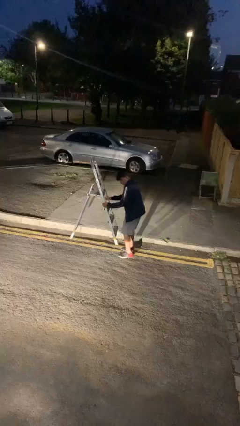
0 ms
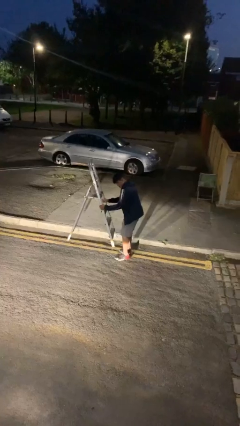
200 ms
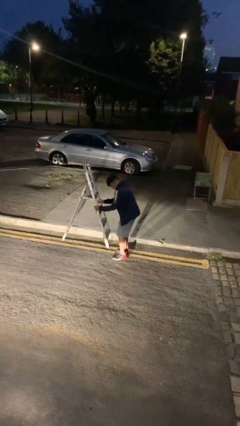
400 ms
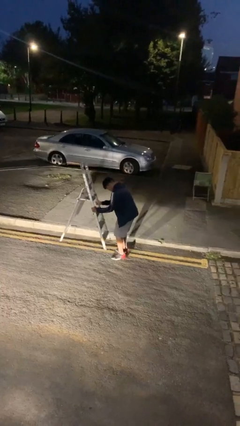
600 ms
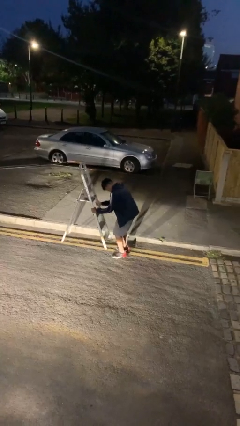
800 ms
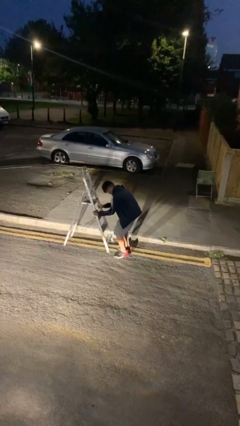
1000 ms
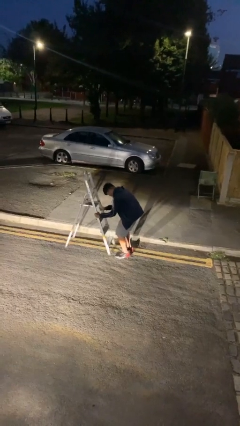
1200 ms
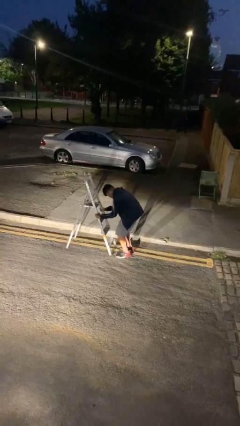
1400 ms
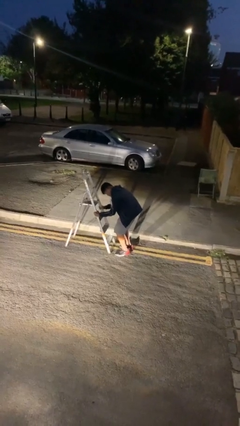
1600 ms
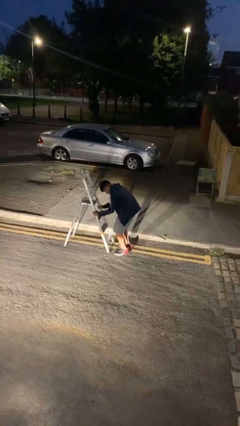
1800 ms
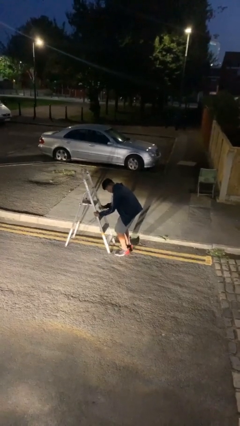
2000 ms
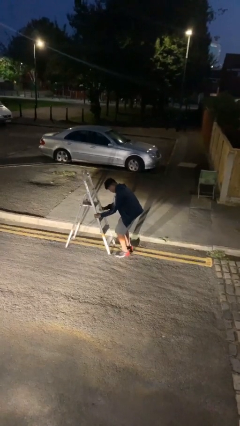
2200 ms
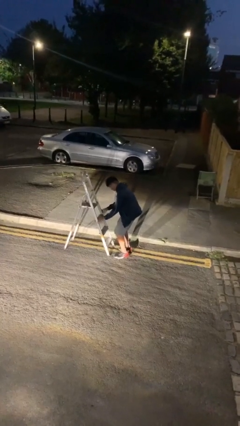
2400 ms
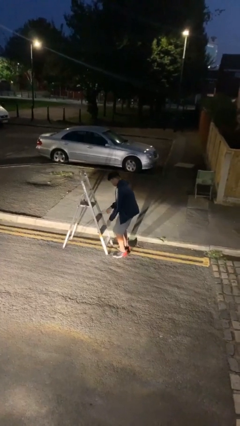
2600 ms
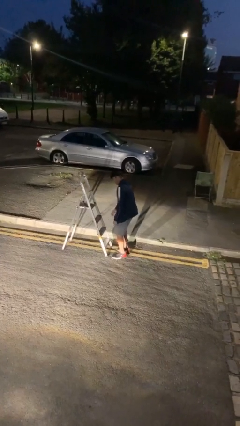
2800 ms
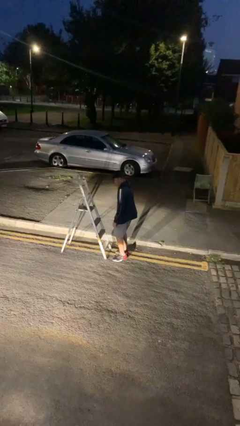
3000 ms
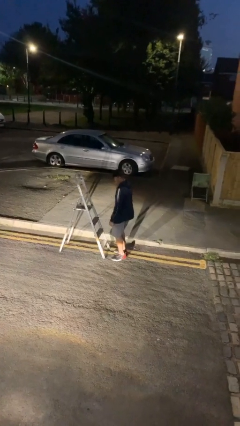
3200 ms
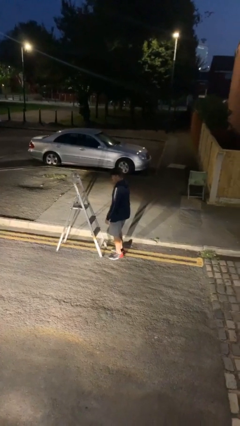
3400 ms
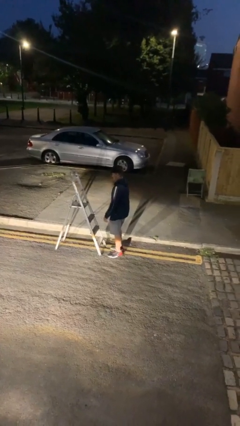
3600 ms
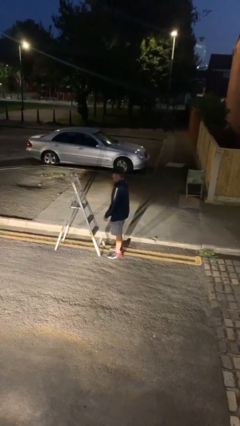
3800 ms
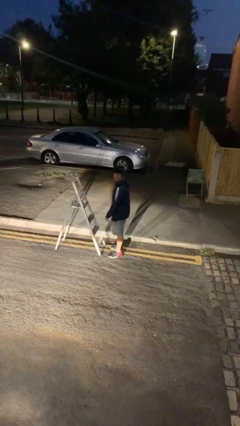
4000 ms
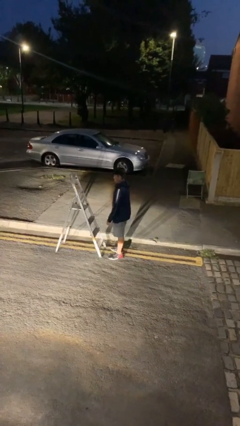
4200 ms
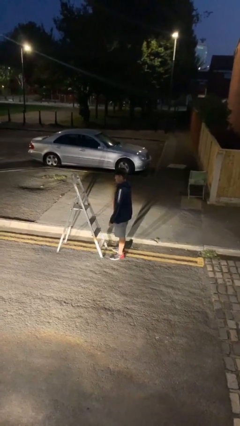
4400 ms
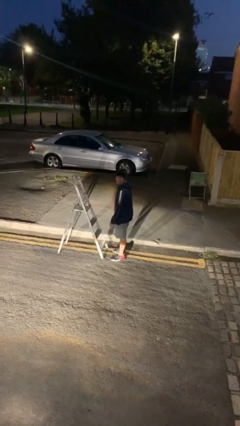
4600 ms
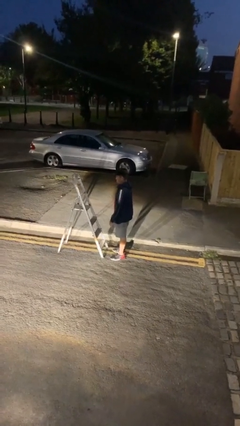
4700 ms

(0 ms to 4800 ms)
person puts down object on floor

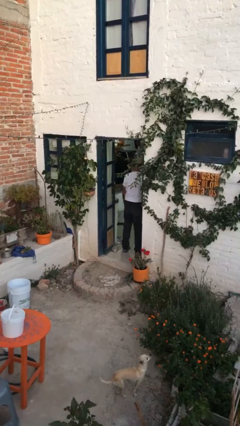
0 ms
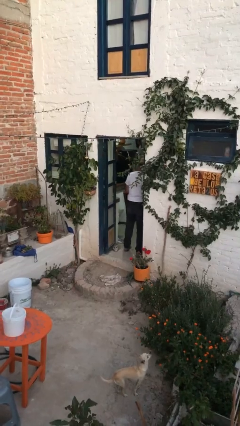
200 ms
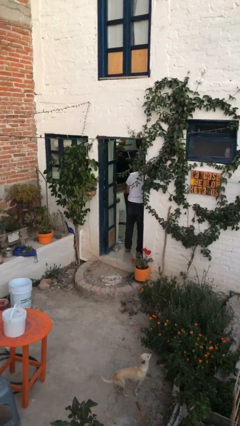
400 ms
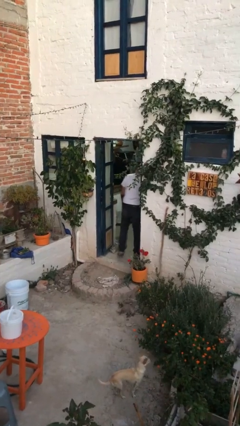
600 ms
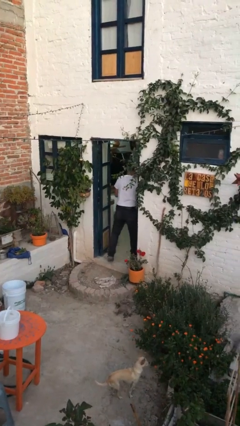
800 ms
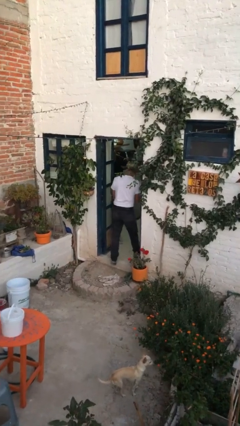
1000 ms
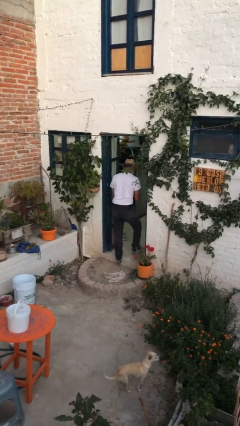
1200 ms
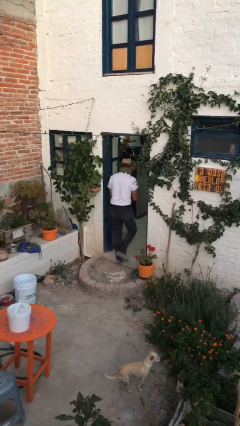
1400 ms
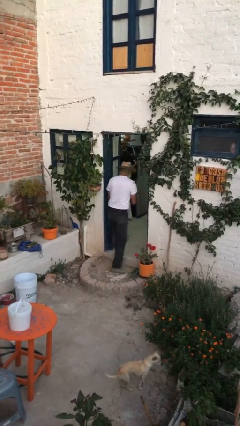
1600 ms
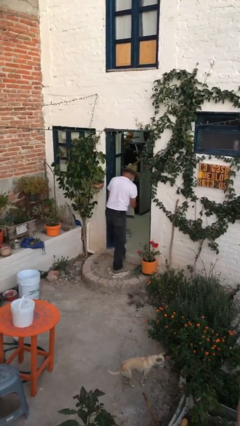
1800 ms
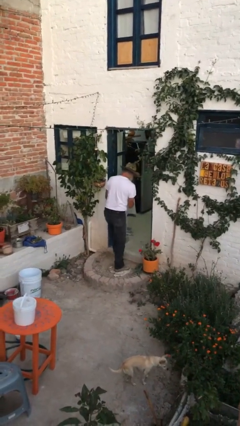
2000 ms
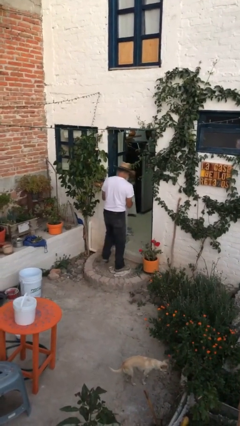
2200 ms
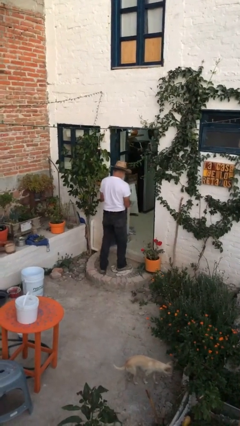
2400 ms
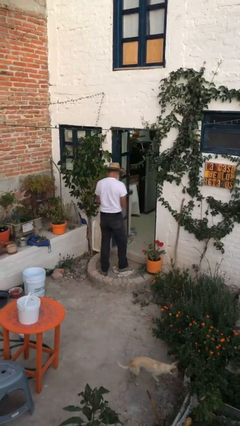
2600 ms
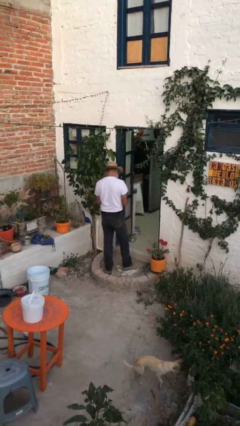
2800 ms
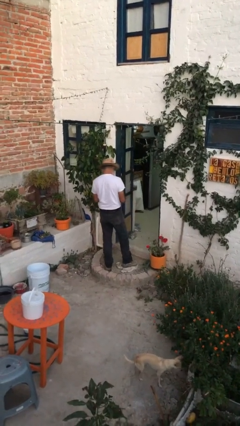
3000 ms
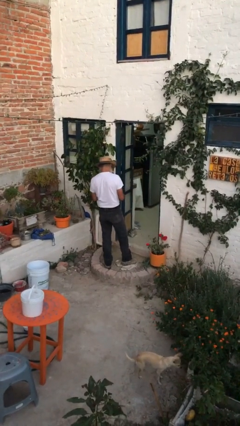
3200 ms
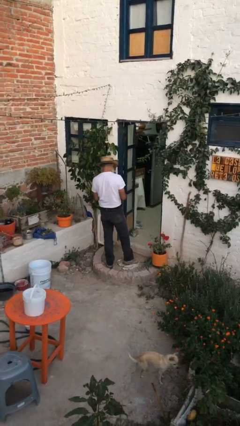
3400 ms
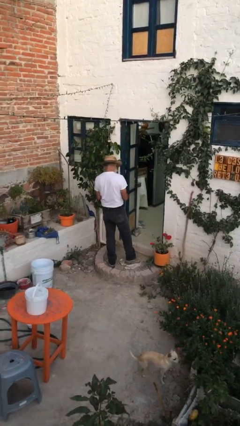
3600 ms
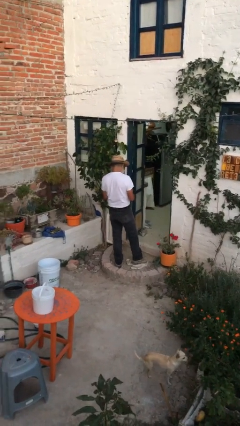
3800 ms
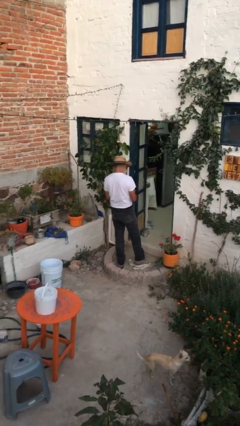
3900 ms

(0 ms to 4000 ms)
person enters scene through structure

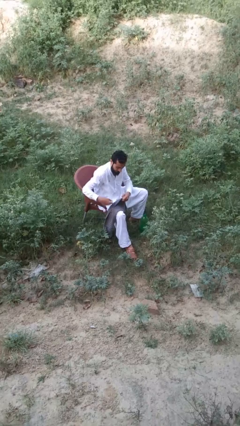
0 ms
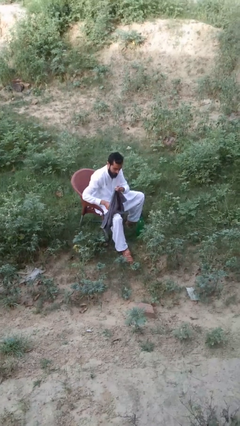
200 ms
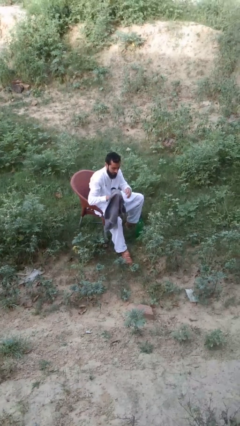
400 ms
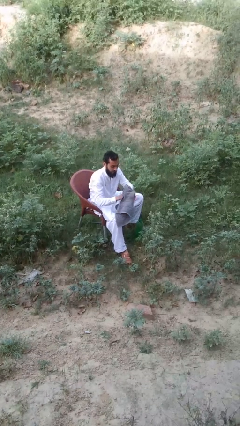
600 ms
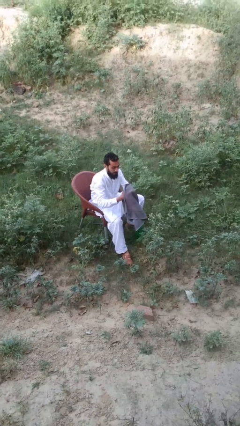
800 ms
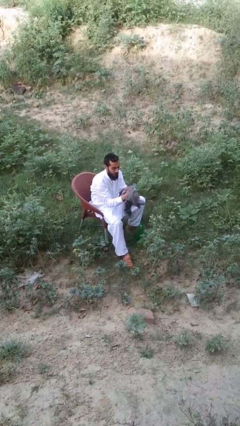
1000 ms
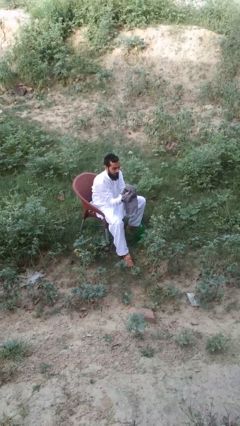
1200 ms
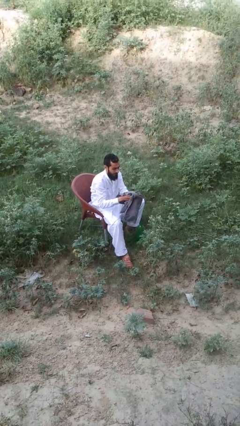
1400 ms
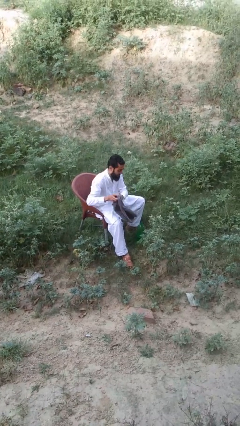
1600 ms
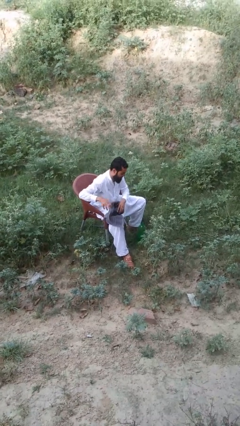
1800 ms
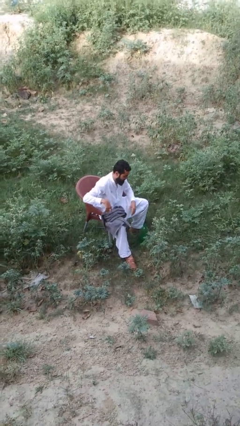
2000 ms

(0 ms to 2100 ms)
person dries hands with towel

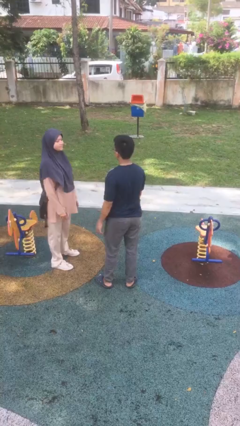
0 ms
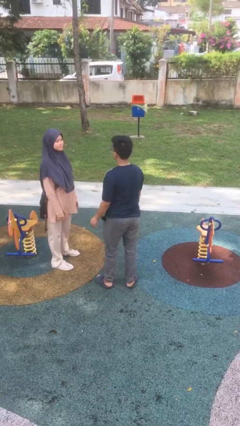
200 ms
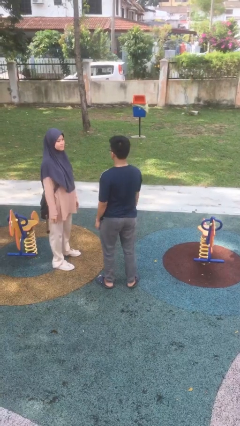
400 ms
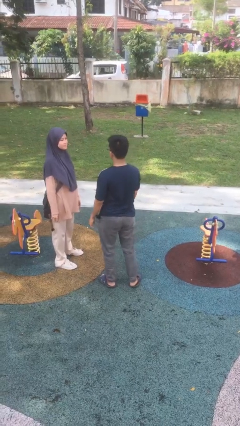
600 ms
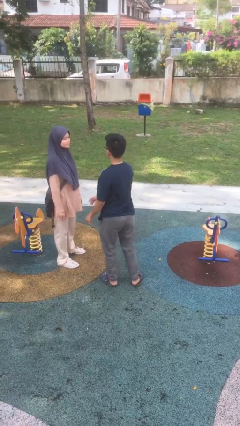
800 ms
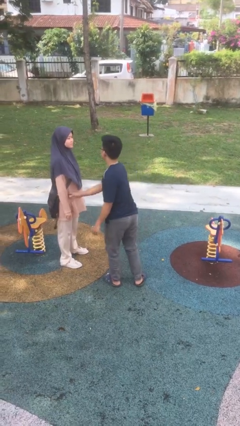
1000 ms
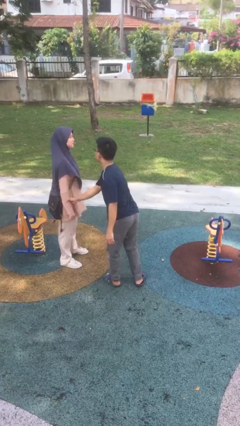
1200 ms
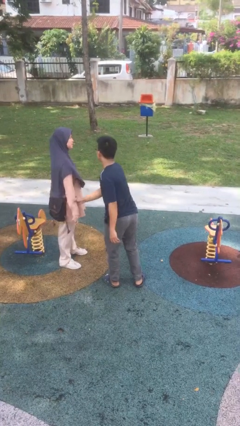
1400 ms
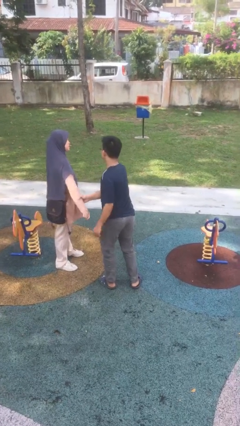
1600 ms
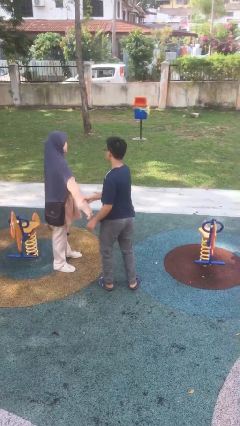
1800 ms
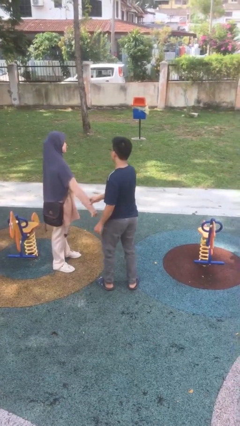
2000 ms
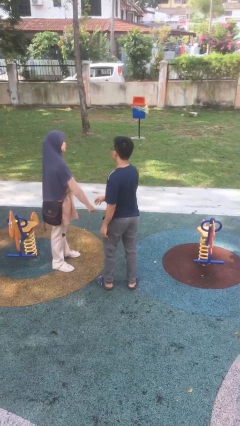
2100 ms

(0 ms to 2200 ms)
person grabs person by forearm

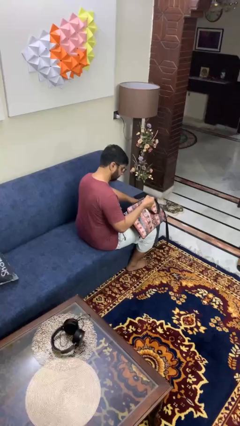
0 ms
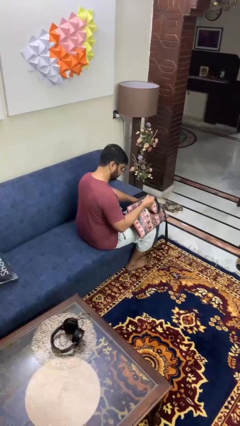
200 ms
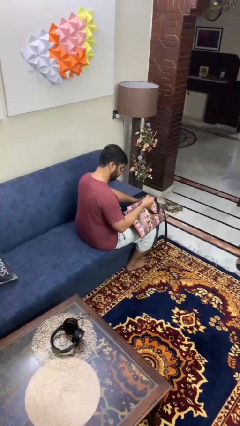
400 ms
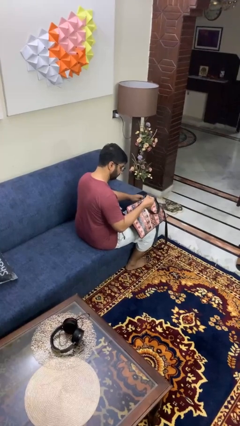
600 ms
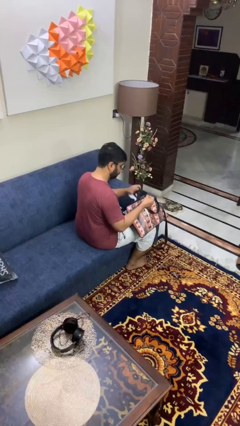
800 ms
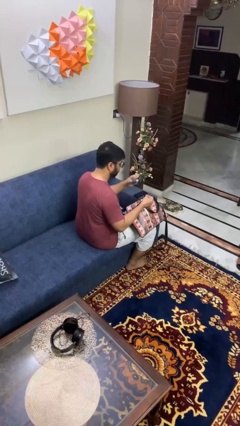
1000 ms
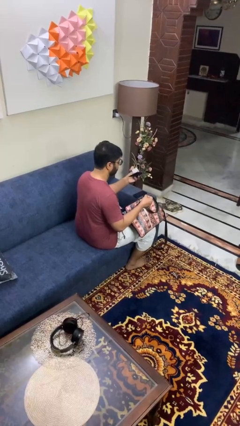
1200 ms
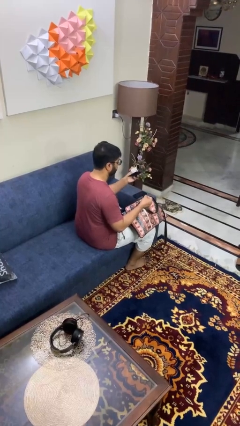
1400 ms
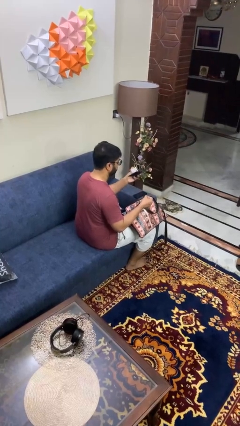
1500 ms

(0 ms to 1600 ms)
person takes object from purse

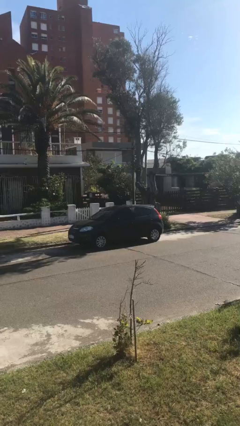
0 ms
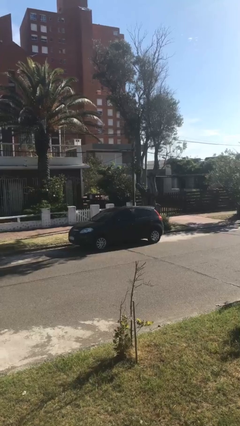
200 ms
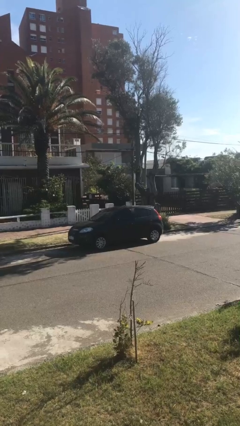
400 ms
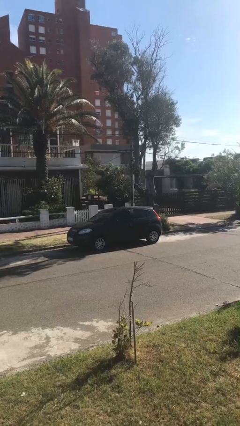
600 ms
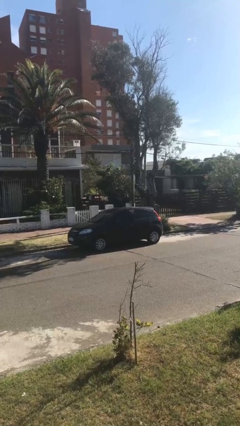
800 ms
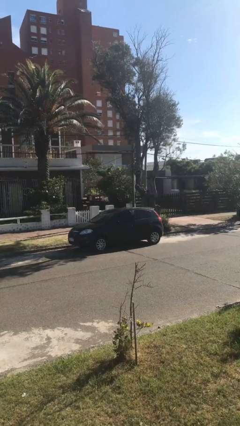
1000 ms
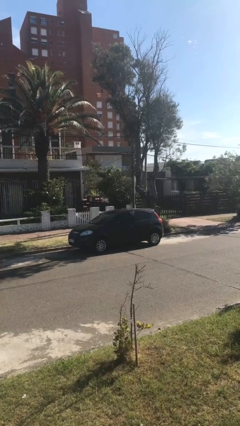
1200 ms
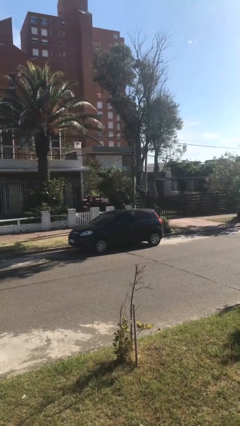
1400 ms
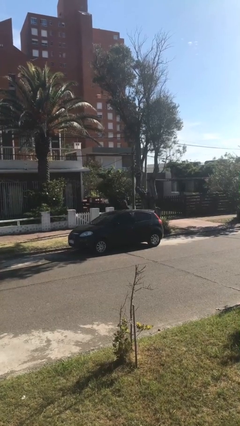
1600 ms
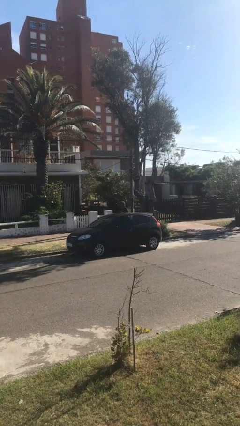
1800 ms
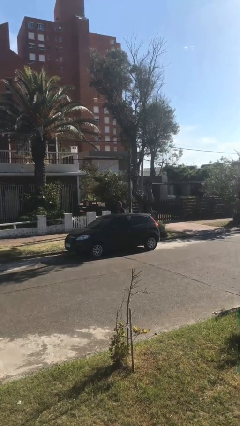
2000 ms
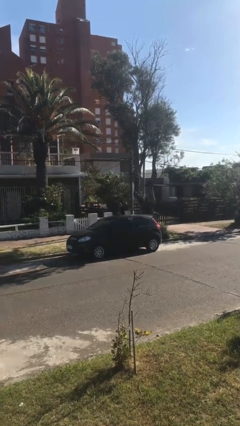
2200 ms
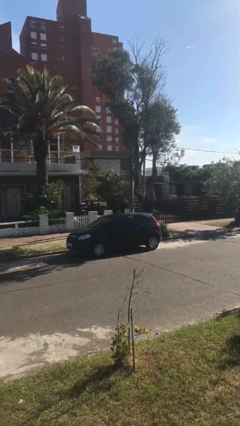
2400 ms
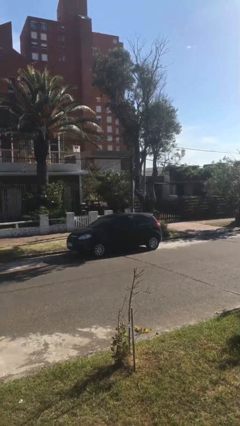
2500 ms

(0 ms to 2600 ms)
person exits car

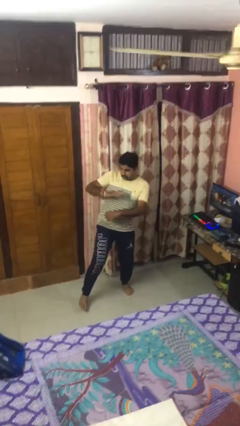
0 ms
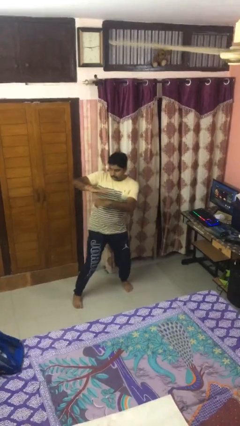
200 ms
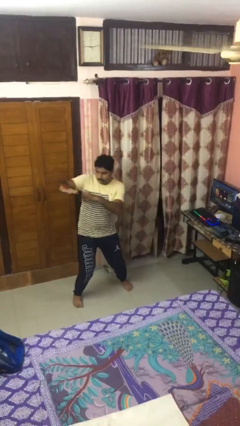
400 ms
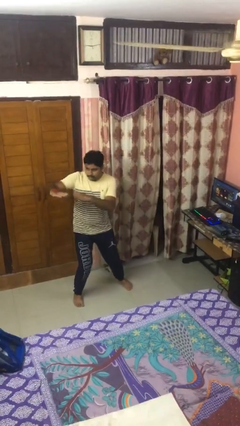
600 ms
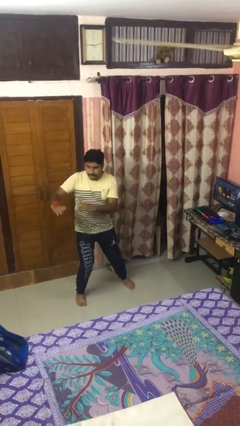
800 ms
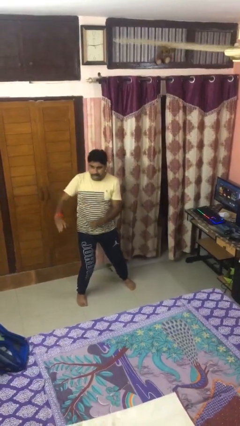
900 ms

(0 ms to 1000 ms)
person karate chop
